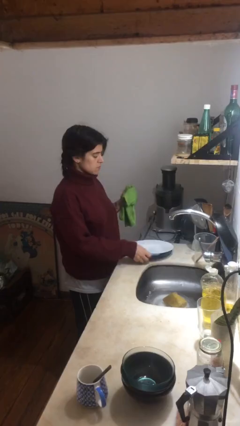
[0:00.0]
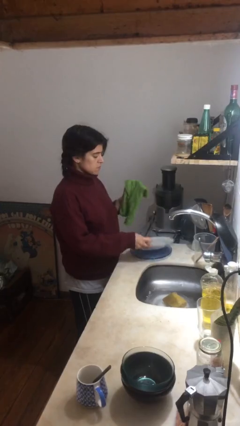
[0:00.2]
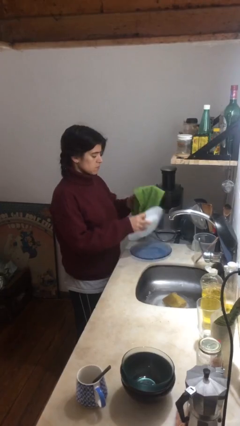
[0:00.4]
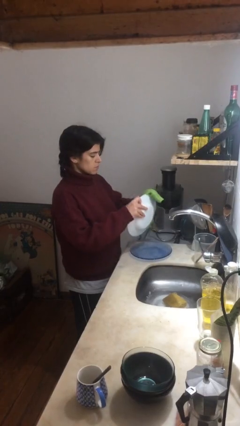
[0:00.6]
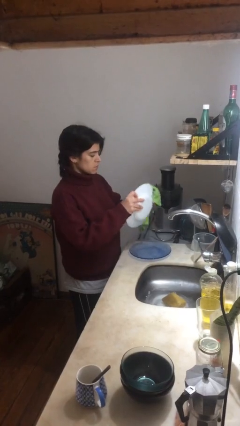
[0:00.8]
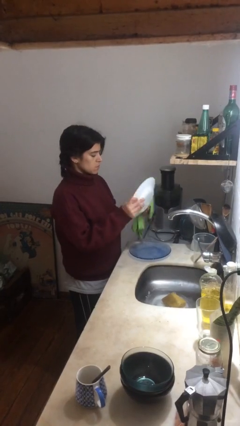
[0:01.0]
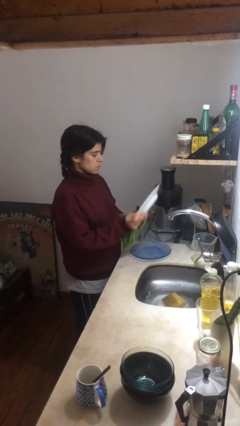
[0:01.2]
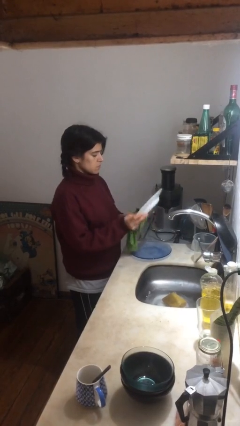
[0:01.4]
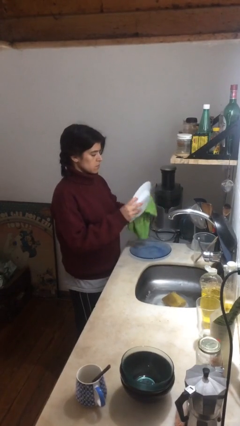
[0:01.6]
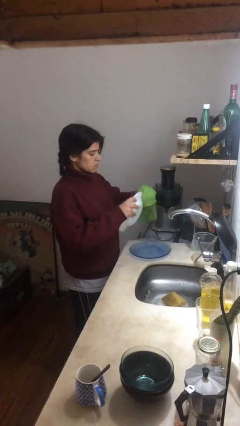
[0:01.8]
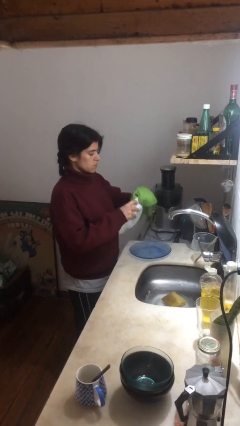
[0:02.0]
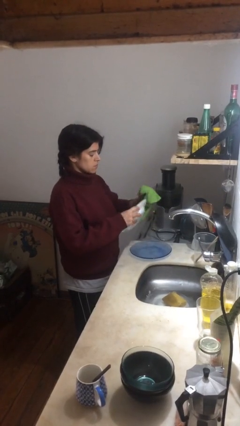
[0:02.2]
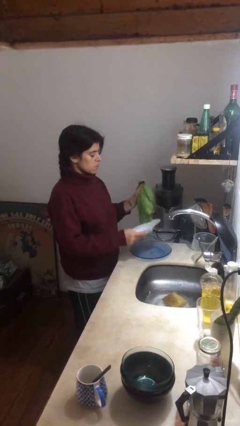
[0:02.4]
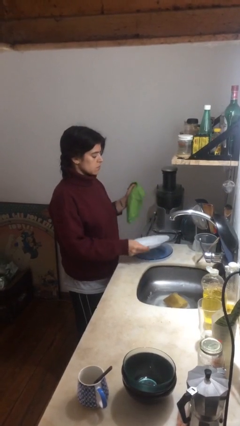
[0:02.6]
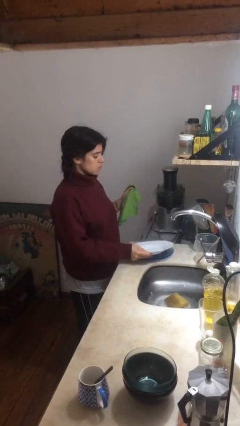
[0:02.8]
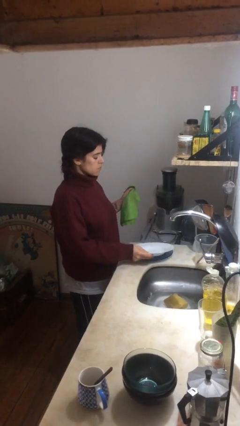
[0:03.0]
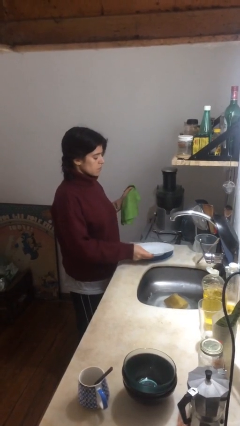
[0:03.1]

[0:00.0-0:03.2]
person dries dish

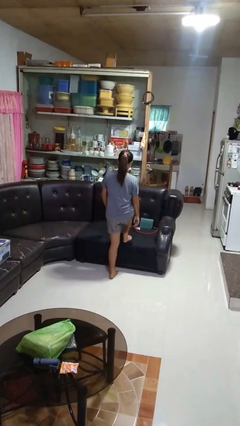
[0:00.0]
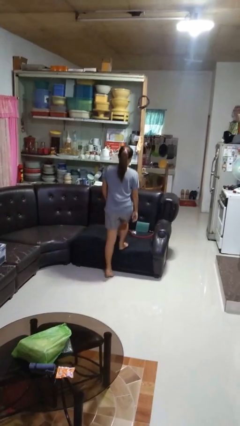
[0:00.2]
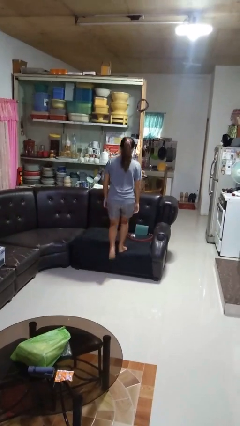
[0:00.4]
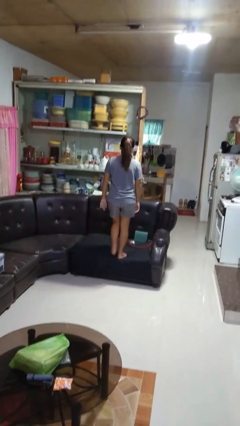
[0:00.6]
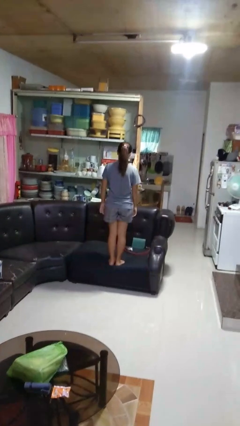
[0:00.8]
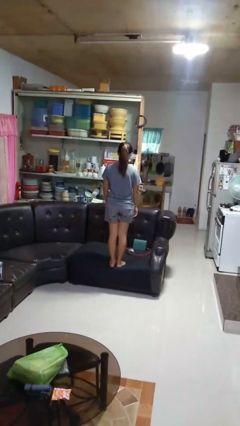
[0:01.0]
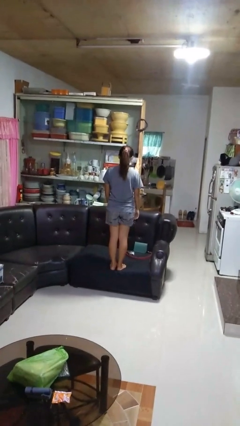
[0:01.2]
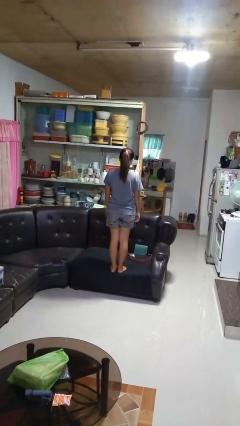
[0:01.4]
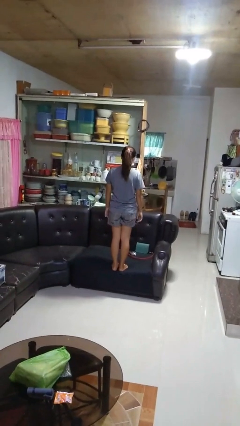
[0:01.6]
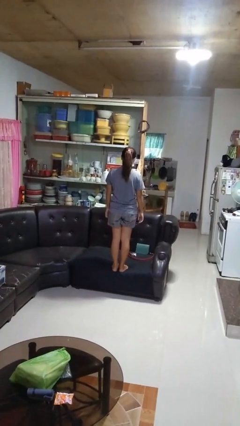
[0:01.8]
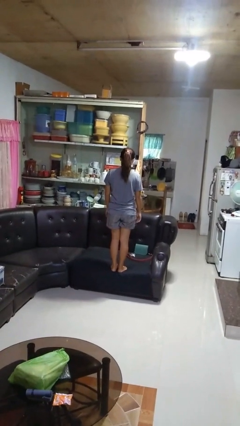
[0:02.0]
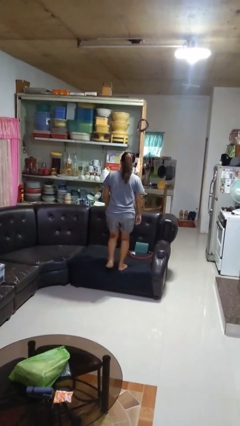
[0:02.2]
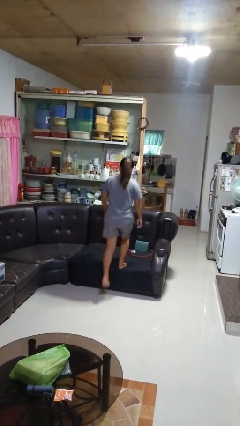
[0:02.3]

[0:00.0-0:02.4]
person climbs on couch

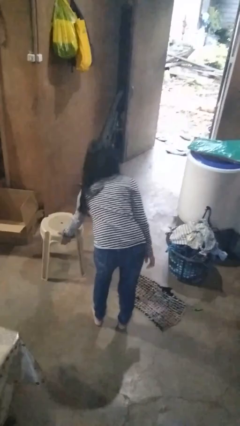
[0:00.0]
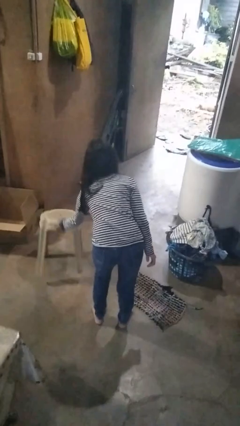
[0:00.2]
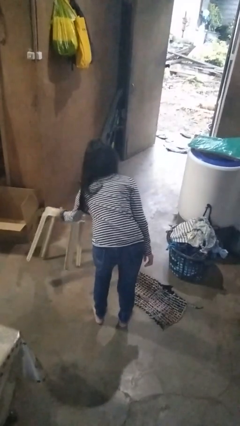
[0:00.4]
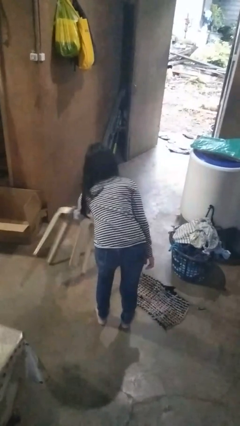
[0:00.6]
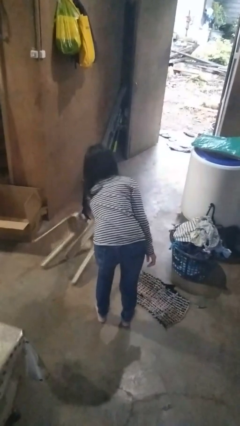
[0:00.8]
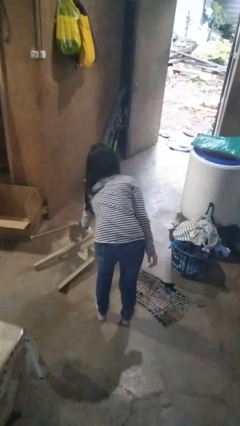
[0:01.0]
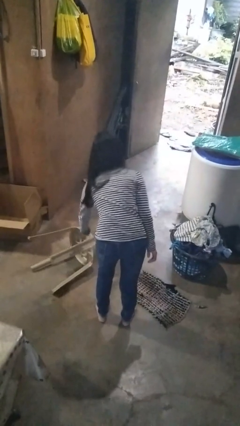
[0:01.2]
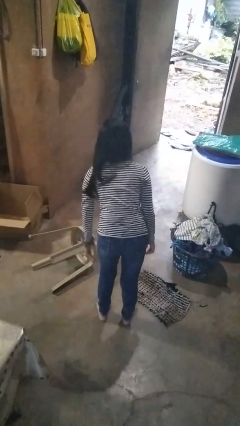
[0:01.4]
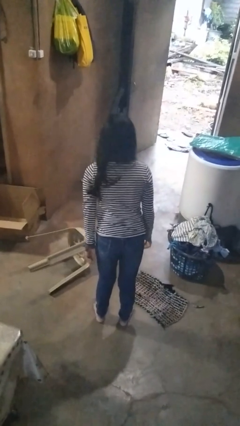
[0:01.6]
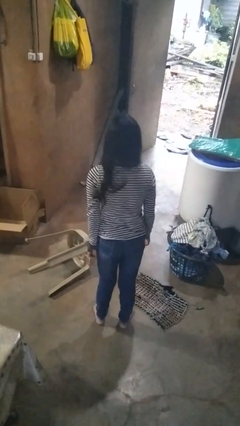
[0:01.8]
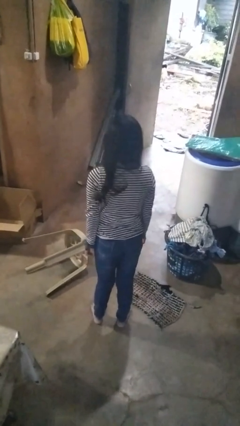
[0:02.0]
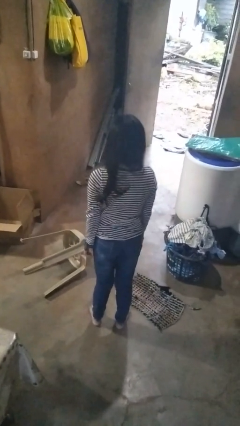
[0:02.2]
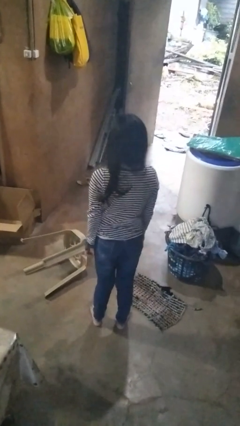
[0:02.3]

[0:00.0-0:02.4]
person knocks over furniture

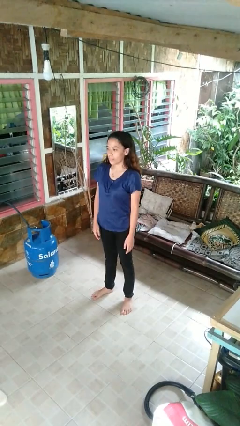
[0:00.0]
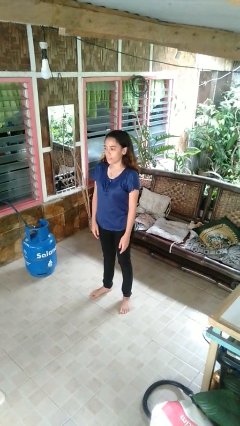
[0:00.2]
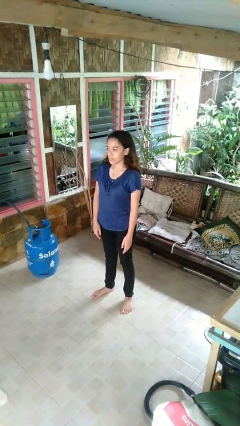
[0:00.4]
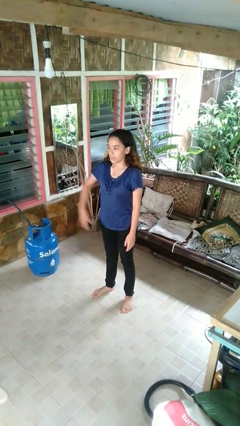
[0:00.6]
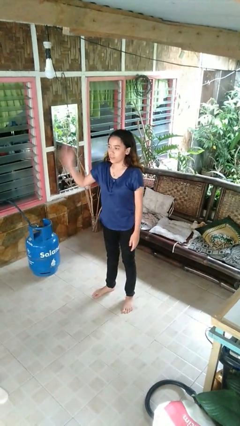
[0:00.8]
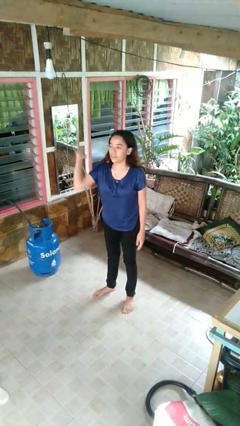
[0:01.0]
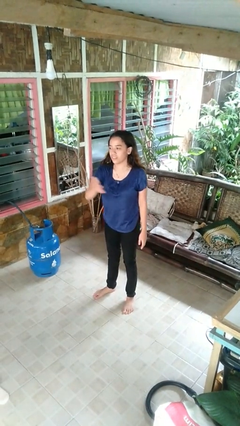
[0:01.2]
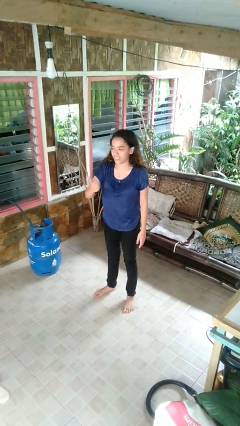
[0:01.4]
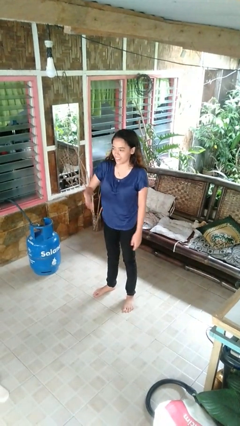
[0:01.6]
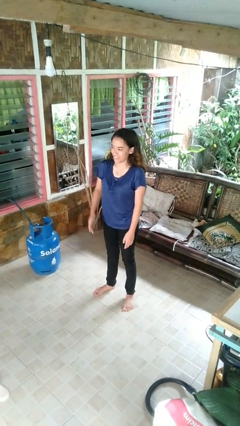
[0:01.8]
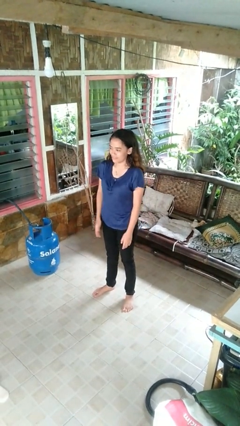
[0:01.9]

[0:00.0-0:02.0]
person karate chop

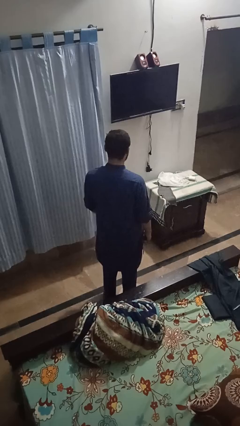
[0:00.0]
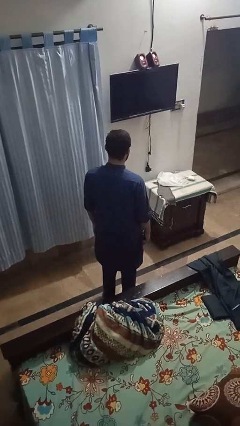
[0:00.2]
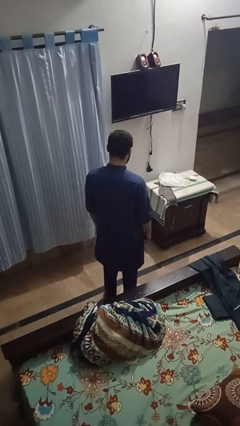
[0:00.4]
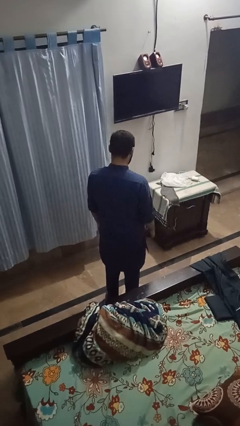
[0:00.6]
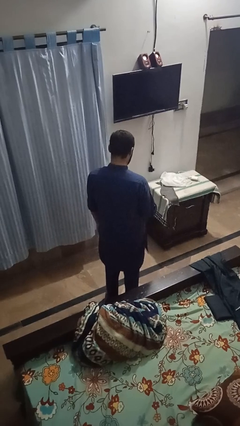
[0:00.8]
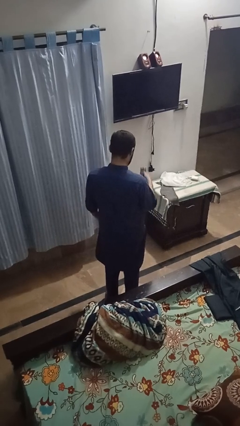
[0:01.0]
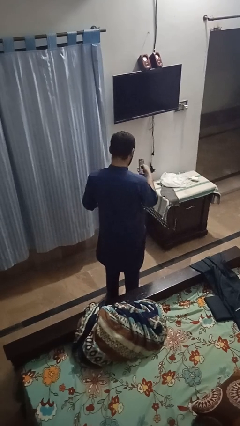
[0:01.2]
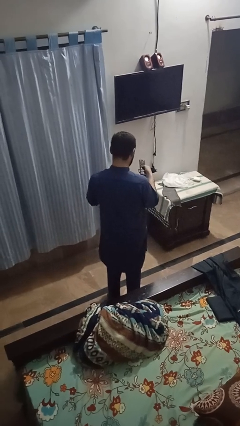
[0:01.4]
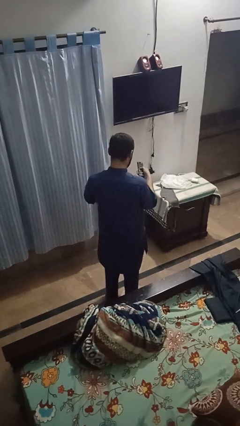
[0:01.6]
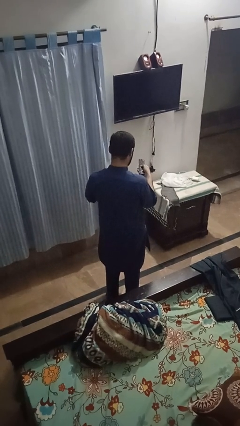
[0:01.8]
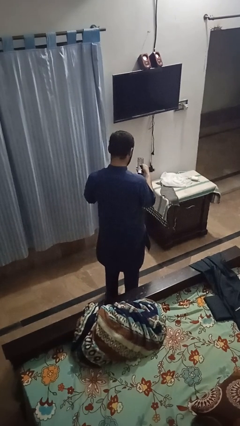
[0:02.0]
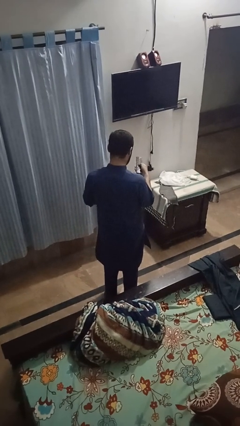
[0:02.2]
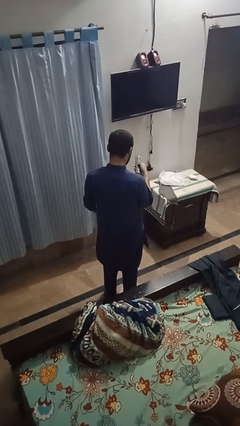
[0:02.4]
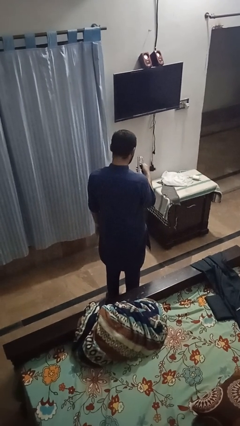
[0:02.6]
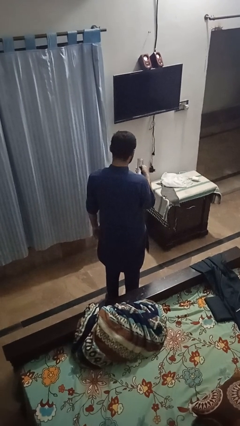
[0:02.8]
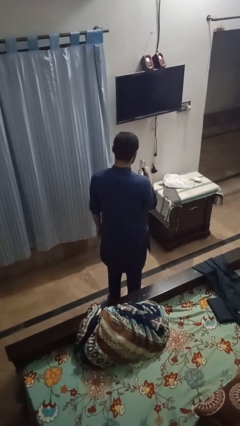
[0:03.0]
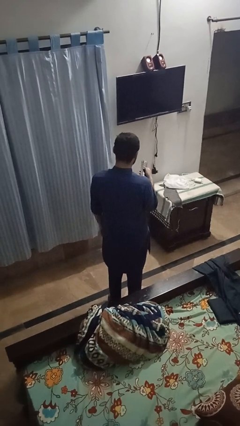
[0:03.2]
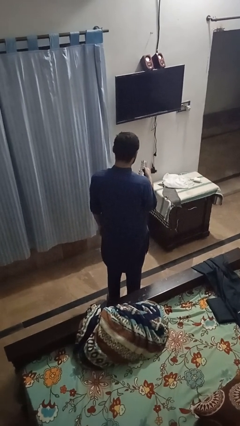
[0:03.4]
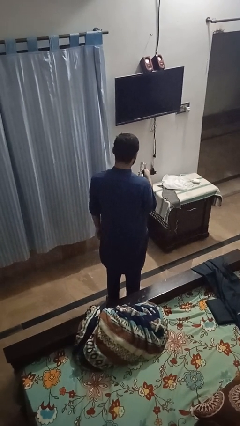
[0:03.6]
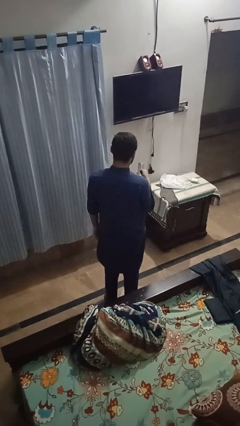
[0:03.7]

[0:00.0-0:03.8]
person uses television remote

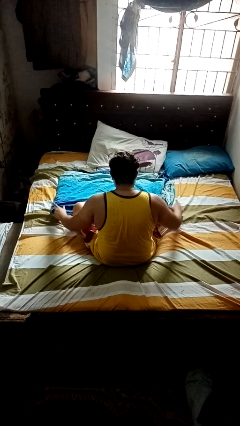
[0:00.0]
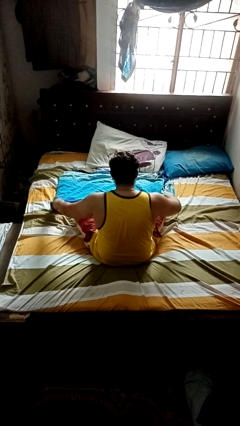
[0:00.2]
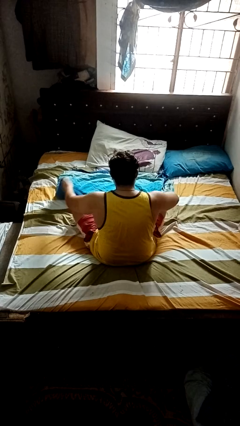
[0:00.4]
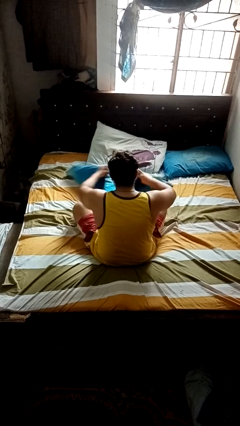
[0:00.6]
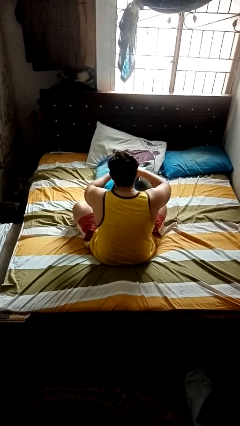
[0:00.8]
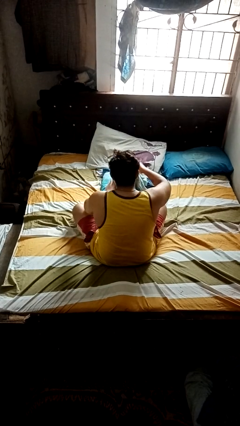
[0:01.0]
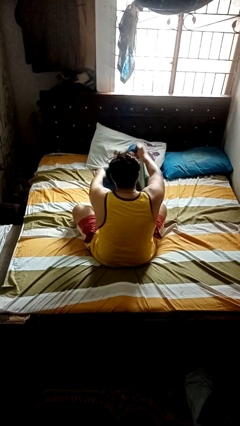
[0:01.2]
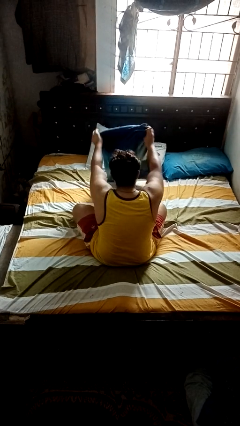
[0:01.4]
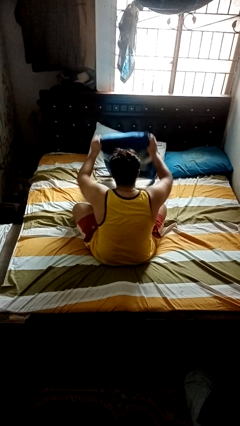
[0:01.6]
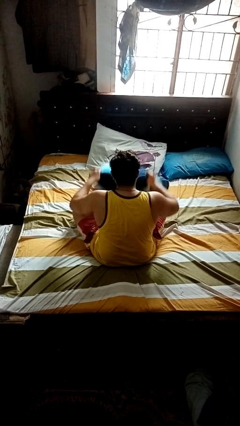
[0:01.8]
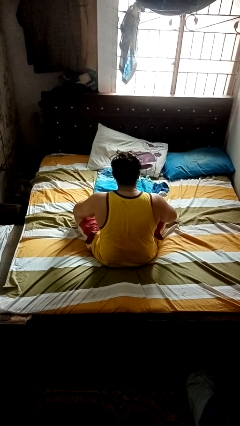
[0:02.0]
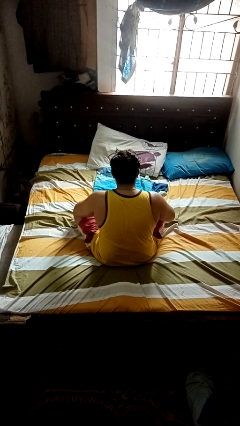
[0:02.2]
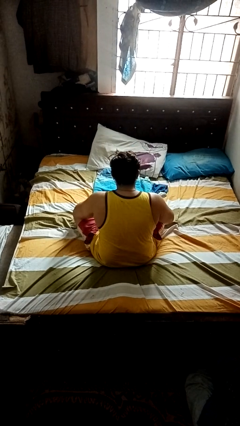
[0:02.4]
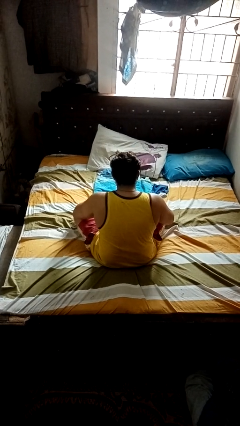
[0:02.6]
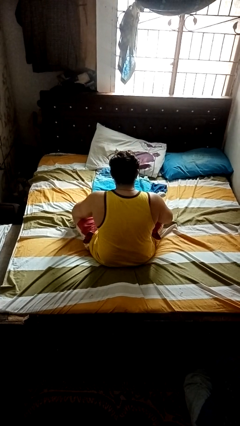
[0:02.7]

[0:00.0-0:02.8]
person folds blanket

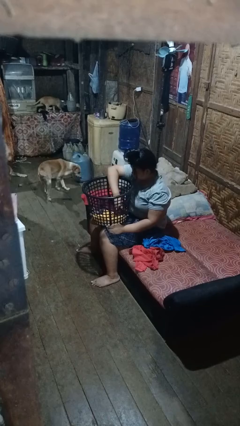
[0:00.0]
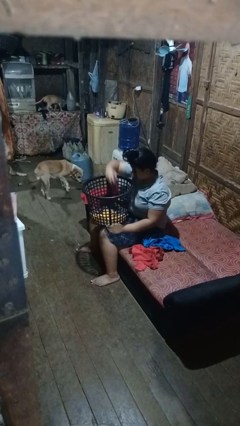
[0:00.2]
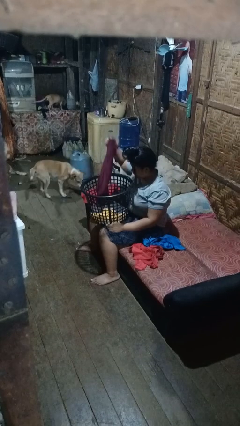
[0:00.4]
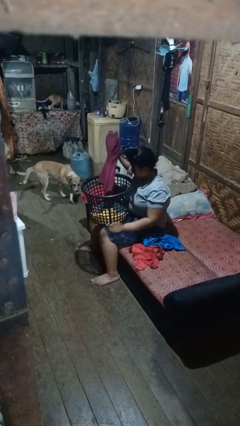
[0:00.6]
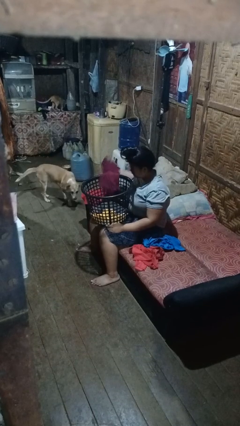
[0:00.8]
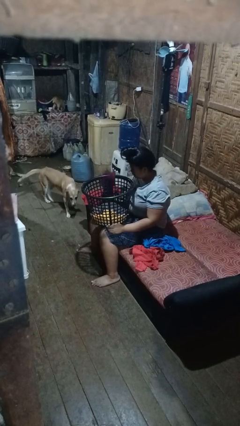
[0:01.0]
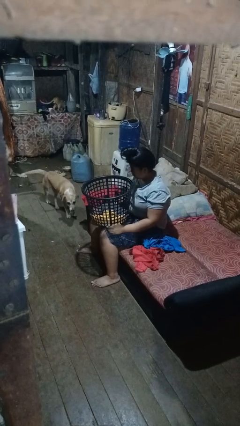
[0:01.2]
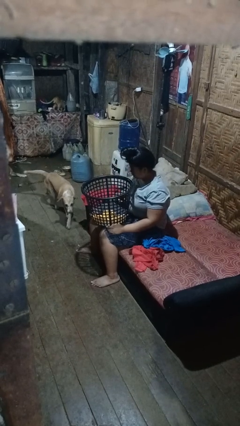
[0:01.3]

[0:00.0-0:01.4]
person takes object from basket
